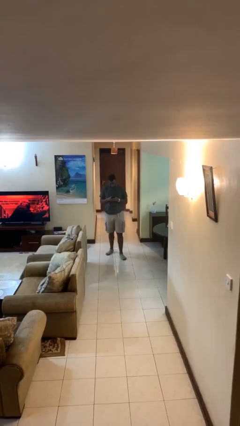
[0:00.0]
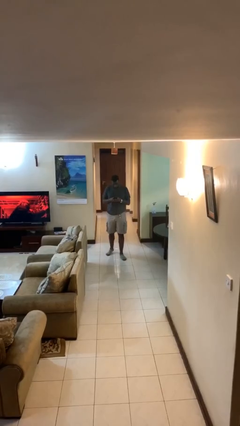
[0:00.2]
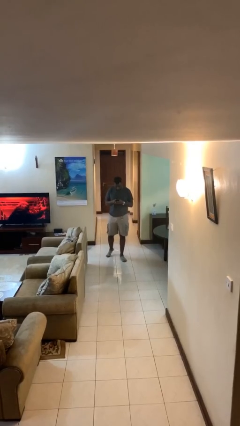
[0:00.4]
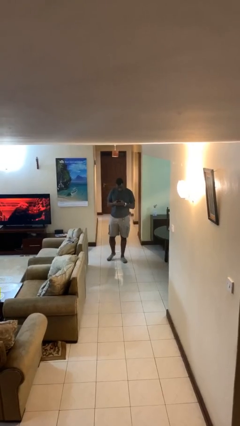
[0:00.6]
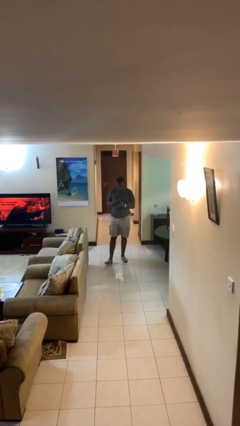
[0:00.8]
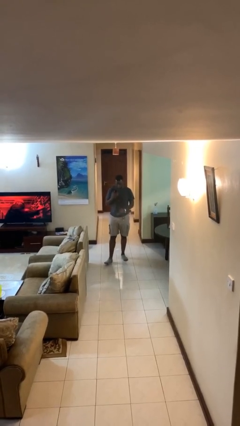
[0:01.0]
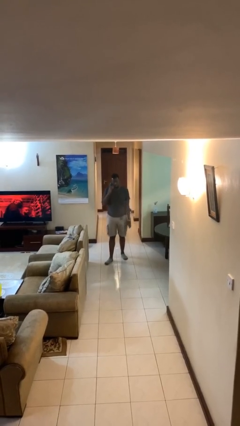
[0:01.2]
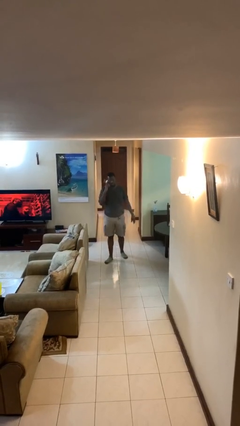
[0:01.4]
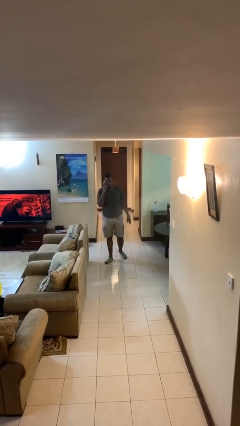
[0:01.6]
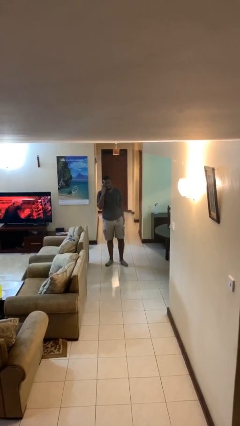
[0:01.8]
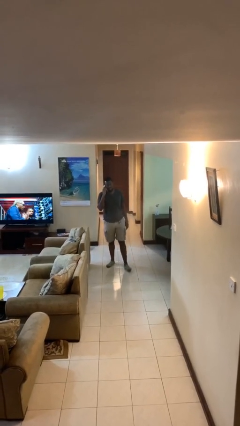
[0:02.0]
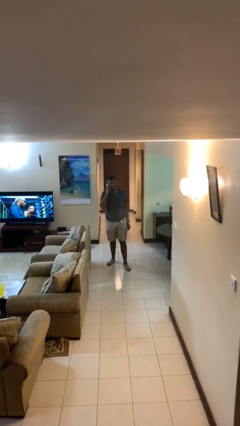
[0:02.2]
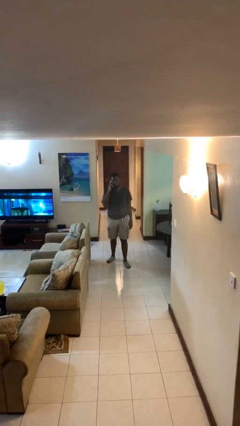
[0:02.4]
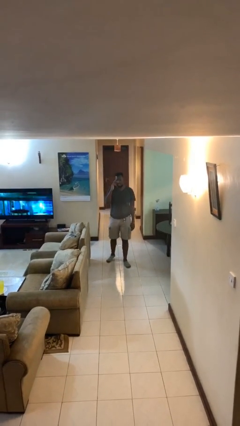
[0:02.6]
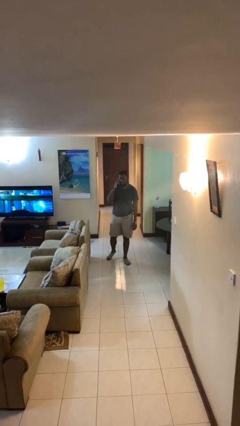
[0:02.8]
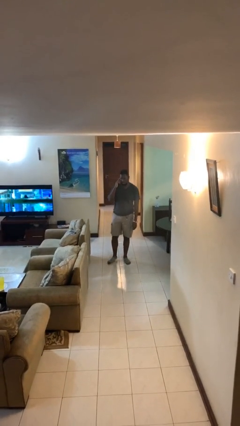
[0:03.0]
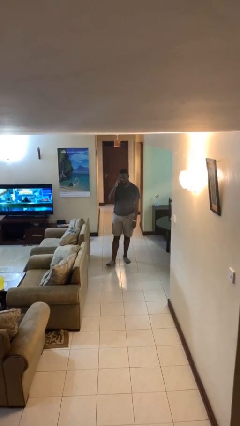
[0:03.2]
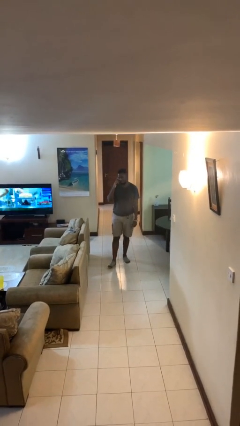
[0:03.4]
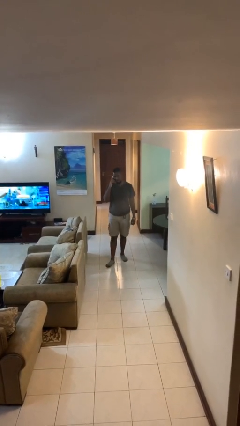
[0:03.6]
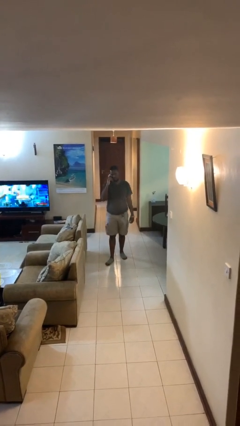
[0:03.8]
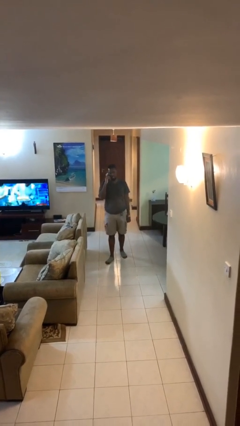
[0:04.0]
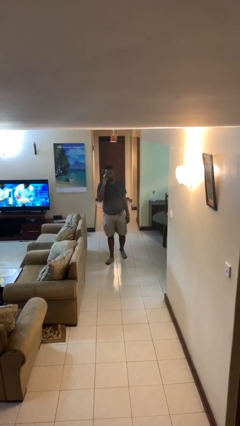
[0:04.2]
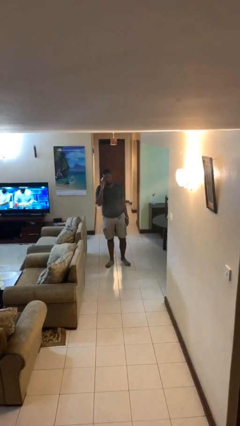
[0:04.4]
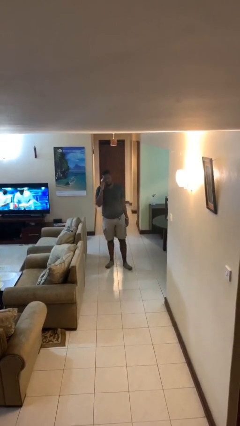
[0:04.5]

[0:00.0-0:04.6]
person talks on phone

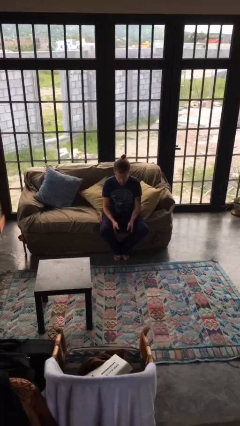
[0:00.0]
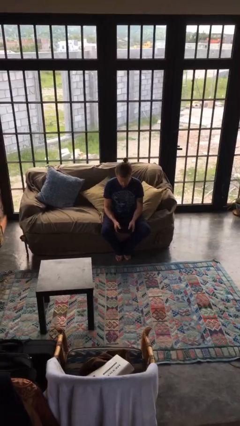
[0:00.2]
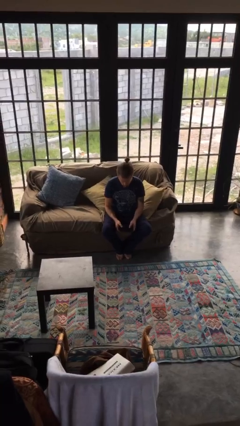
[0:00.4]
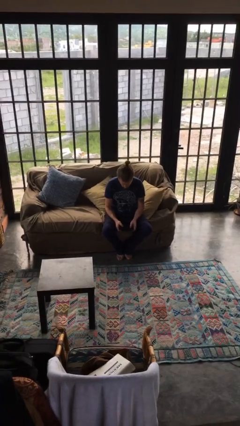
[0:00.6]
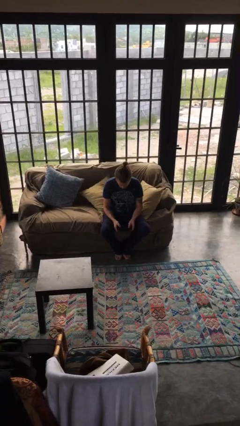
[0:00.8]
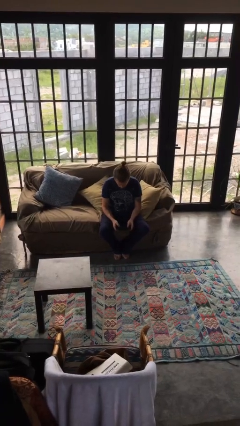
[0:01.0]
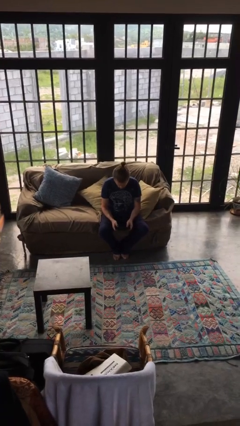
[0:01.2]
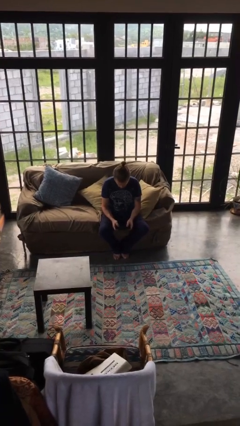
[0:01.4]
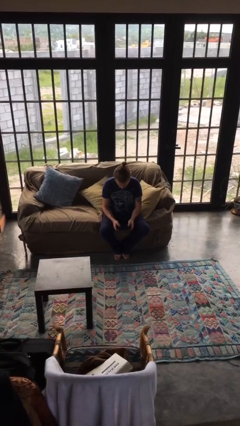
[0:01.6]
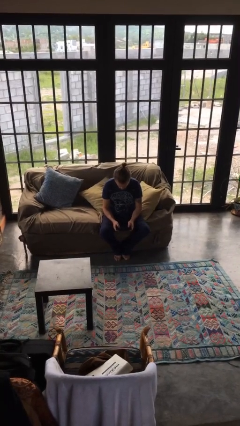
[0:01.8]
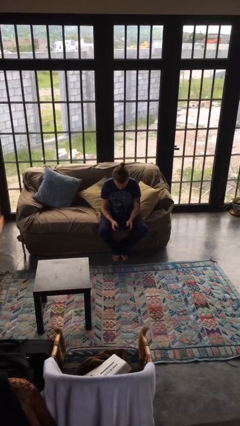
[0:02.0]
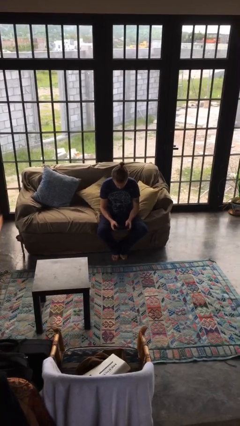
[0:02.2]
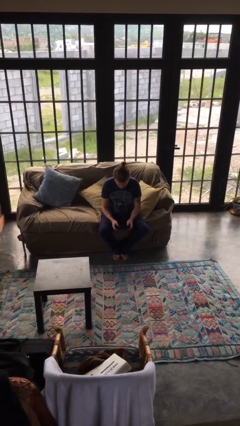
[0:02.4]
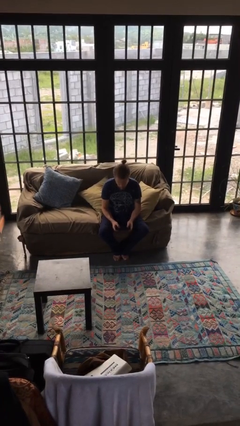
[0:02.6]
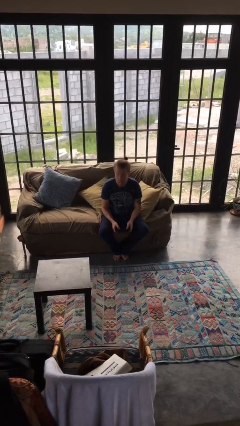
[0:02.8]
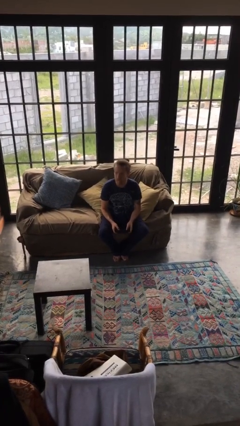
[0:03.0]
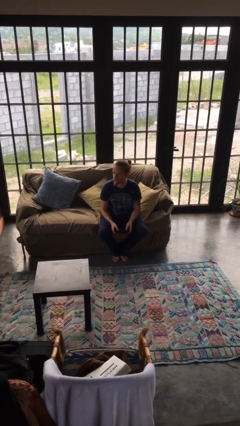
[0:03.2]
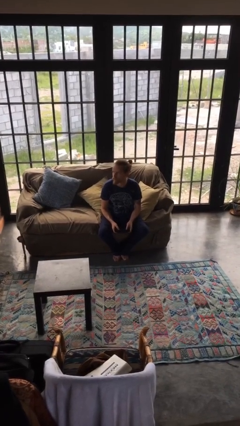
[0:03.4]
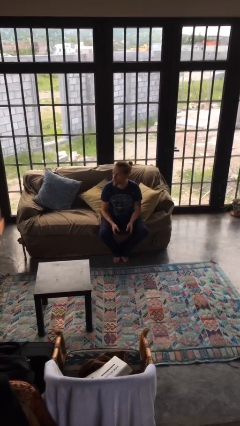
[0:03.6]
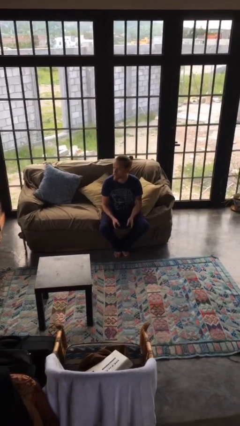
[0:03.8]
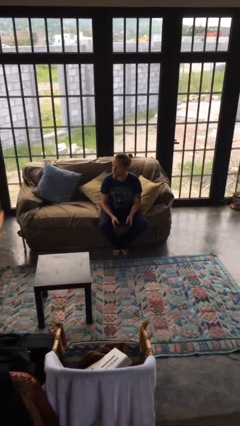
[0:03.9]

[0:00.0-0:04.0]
person interacts with handheld game

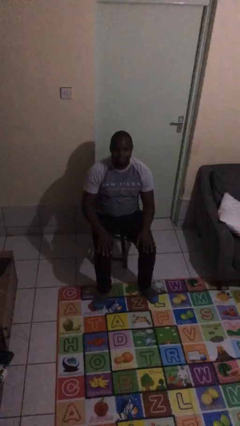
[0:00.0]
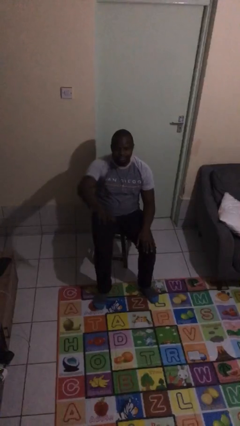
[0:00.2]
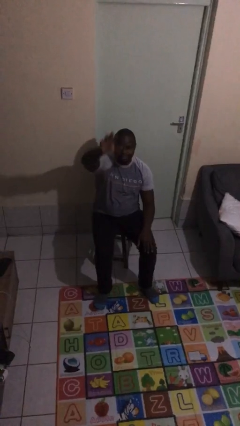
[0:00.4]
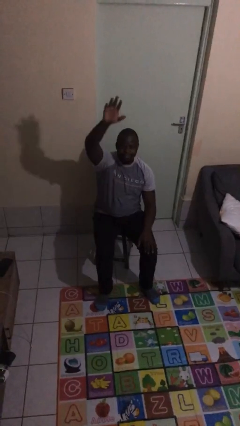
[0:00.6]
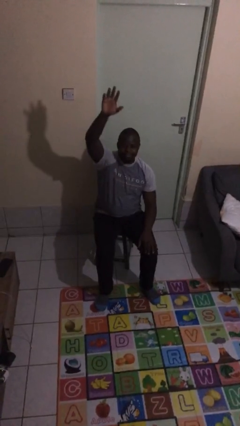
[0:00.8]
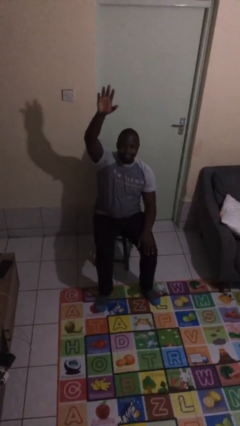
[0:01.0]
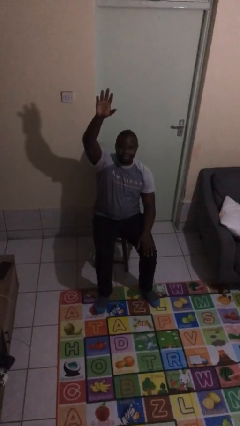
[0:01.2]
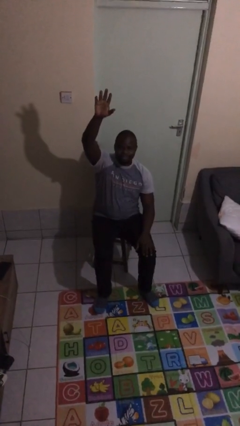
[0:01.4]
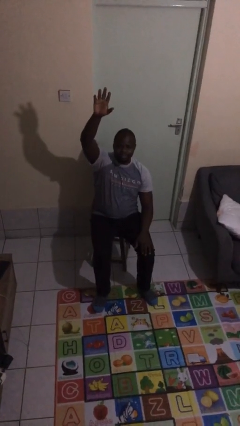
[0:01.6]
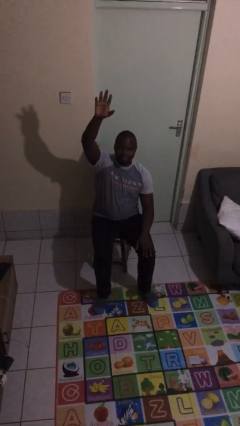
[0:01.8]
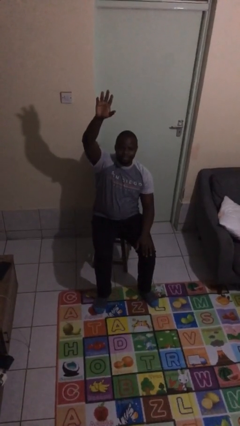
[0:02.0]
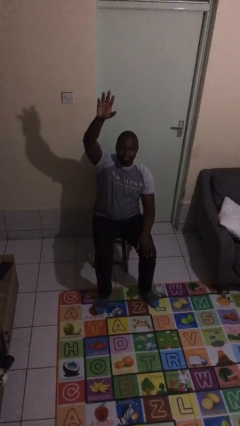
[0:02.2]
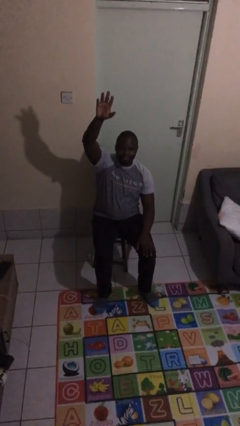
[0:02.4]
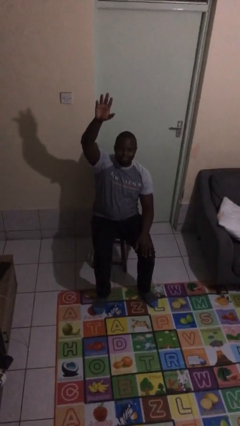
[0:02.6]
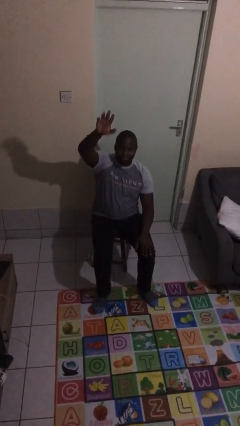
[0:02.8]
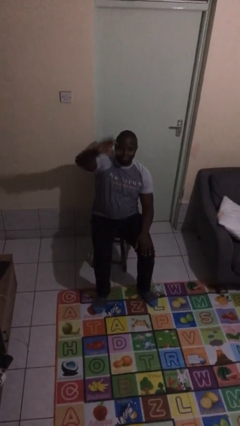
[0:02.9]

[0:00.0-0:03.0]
person gestures raise hand

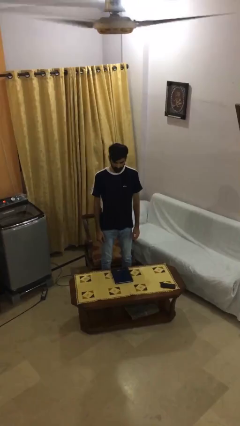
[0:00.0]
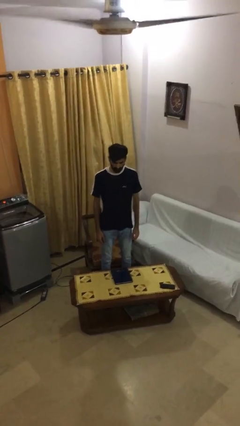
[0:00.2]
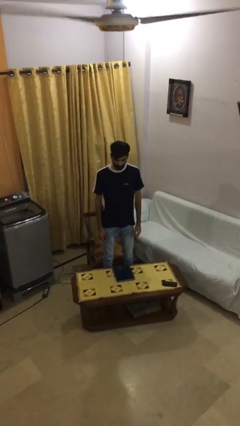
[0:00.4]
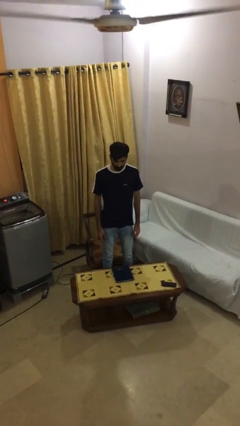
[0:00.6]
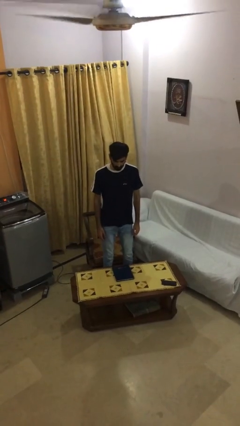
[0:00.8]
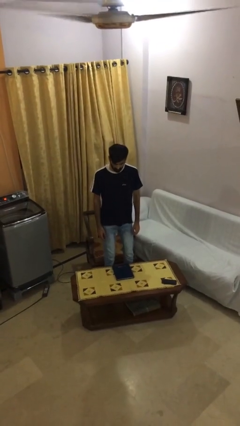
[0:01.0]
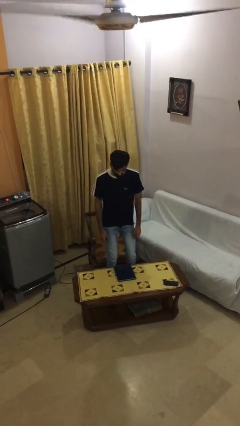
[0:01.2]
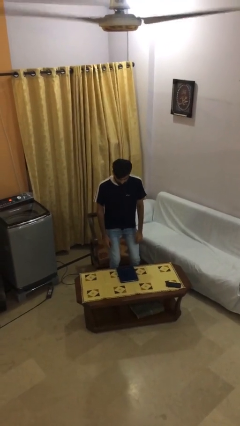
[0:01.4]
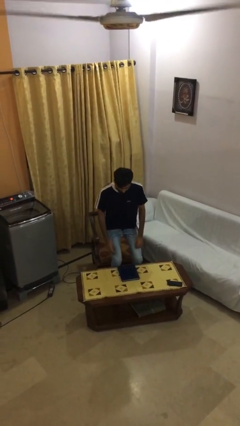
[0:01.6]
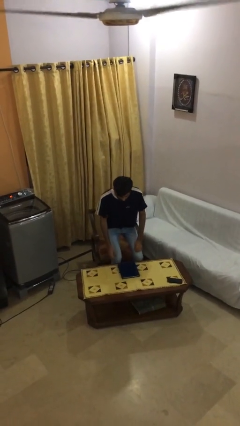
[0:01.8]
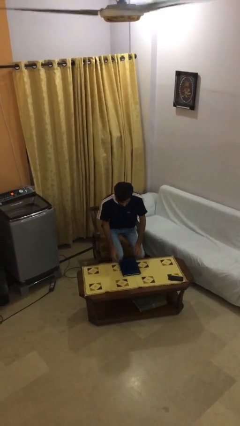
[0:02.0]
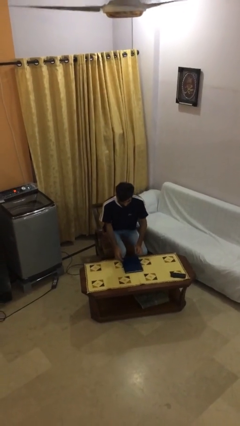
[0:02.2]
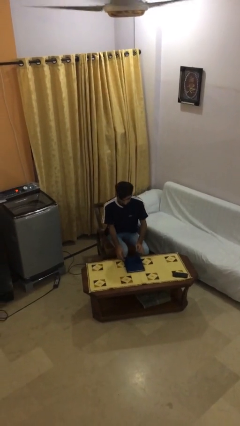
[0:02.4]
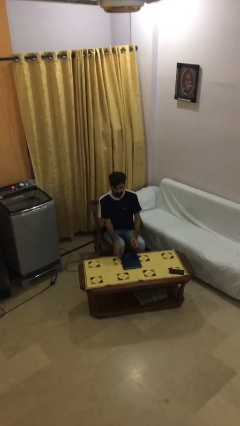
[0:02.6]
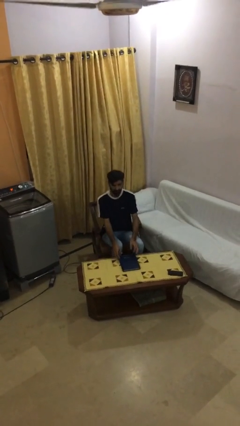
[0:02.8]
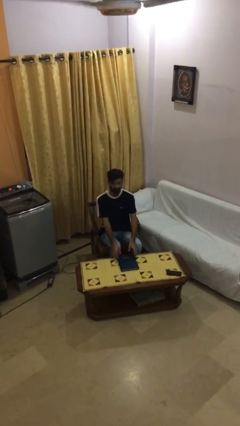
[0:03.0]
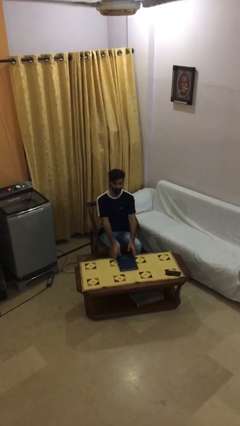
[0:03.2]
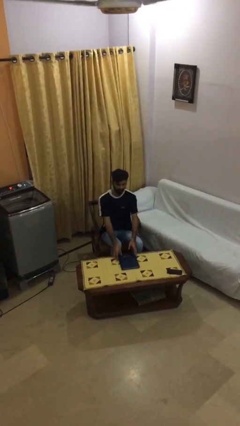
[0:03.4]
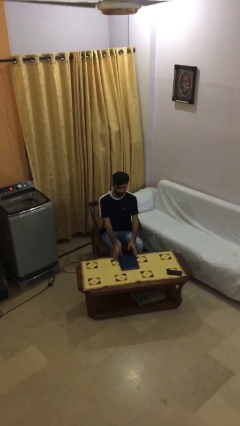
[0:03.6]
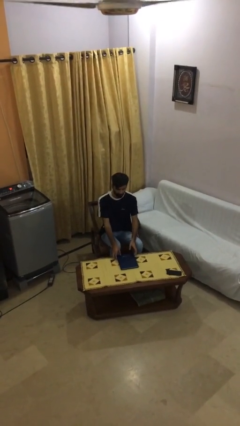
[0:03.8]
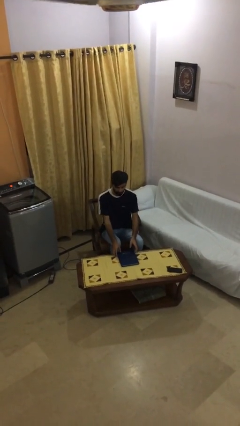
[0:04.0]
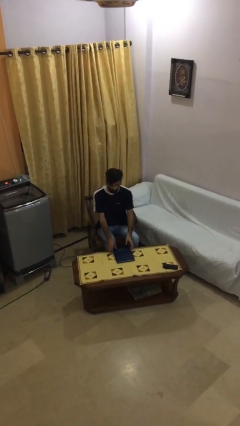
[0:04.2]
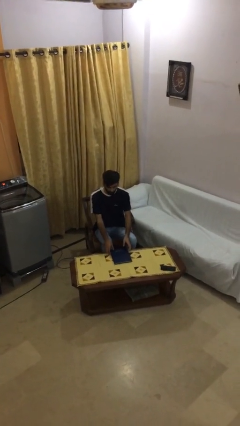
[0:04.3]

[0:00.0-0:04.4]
person sits down

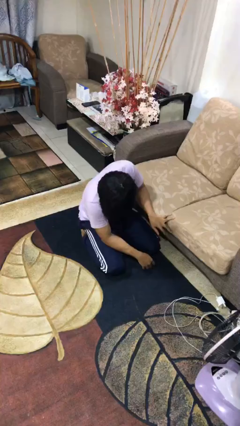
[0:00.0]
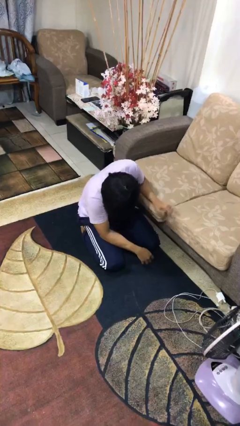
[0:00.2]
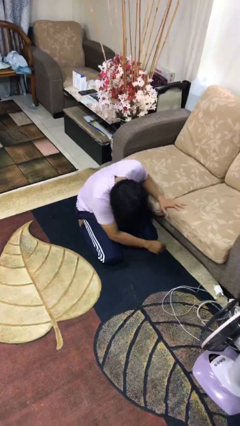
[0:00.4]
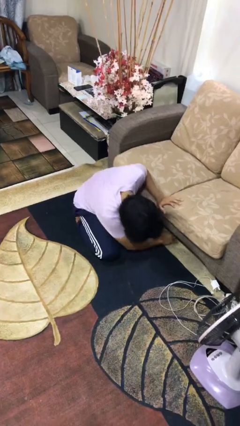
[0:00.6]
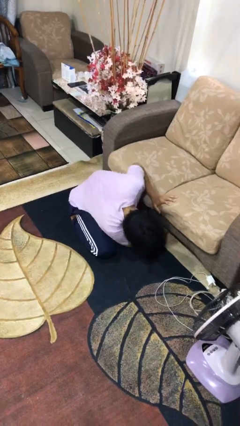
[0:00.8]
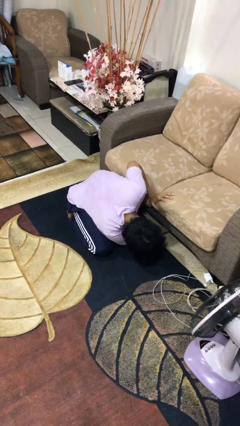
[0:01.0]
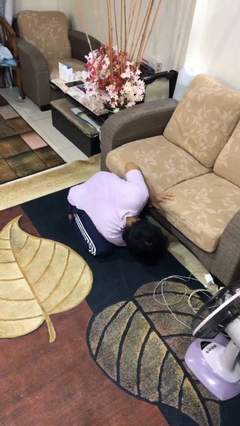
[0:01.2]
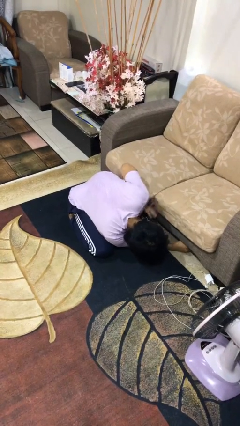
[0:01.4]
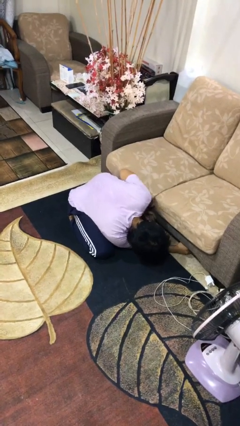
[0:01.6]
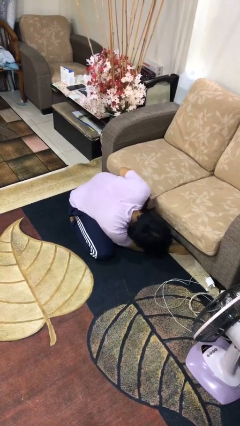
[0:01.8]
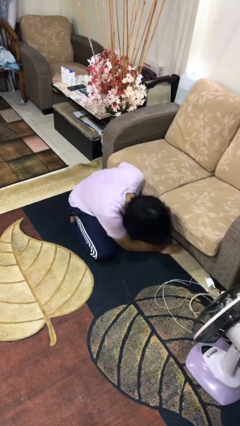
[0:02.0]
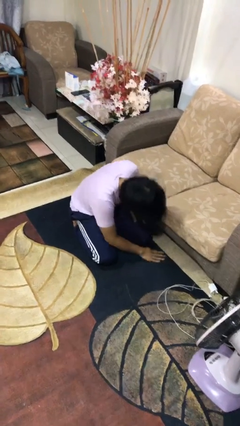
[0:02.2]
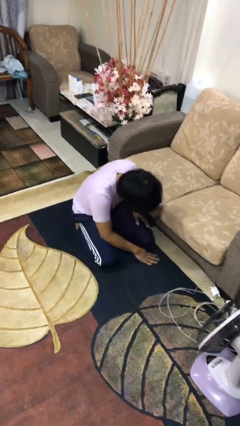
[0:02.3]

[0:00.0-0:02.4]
person searches under couch
